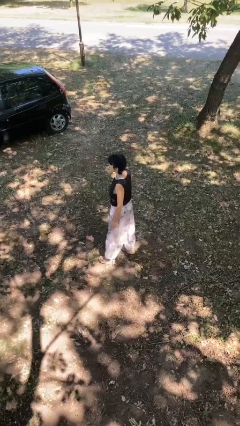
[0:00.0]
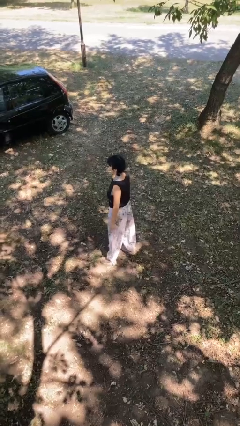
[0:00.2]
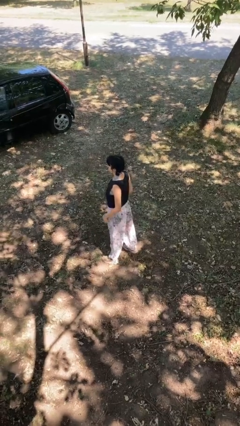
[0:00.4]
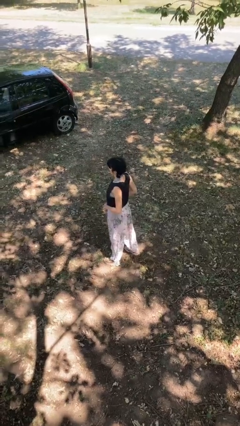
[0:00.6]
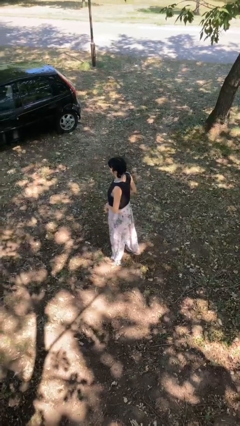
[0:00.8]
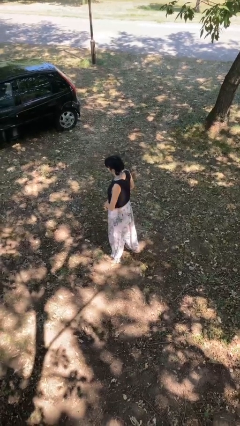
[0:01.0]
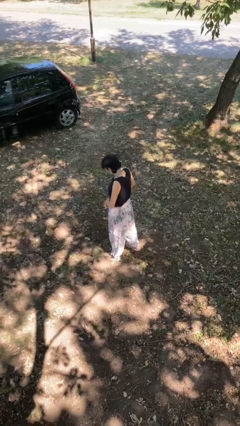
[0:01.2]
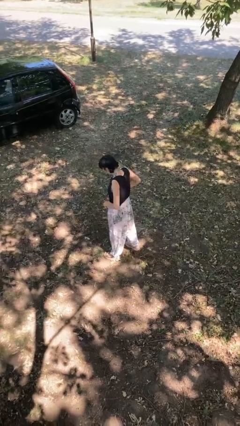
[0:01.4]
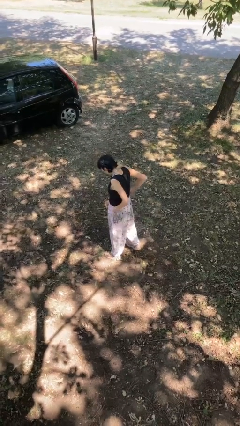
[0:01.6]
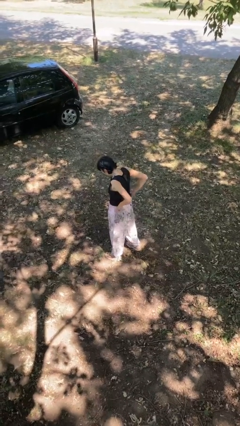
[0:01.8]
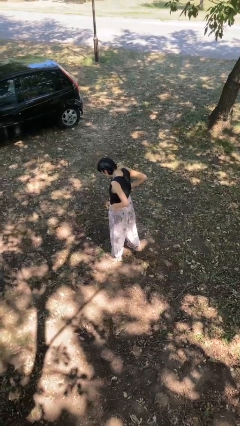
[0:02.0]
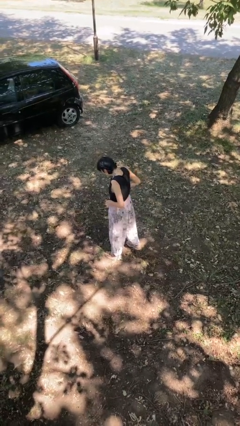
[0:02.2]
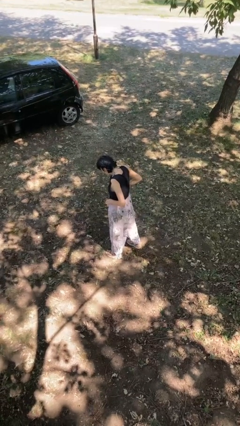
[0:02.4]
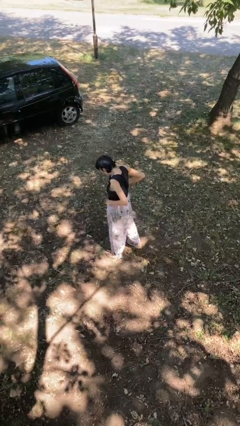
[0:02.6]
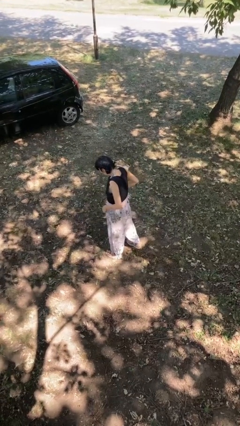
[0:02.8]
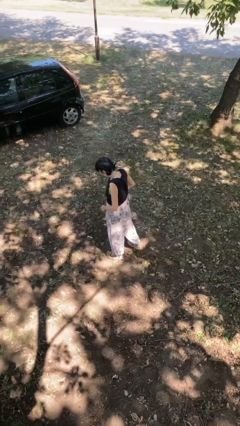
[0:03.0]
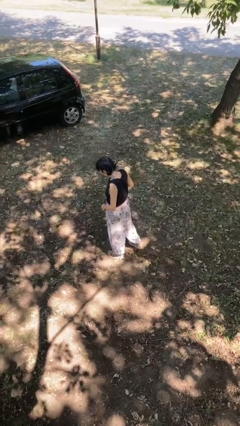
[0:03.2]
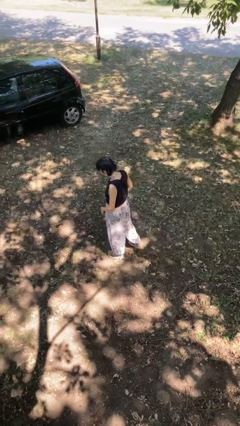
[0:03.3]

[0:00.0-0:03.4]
person hikes up pants

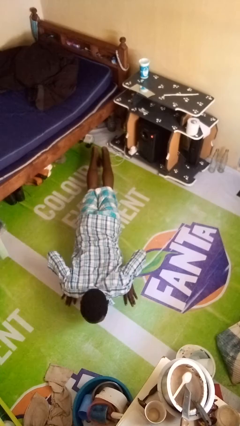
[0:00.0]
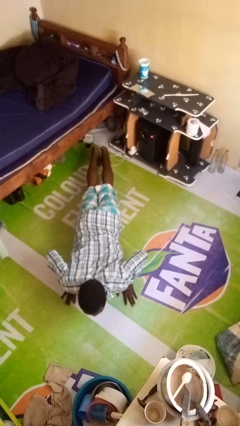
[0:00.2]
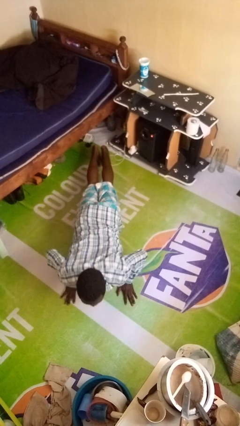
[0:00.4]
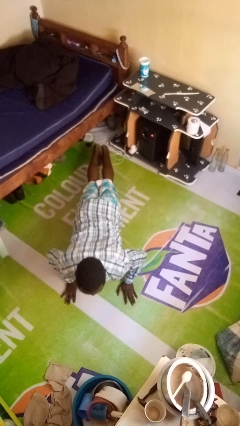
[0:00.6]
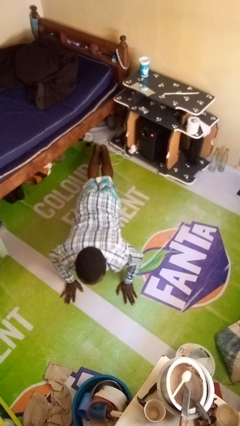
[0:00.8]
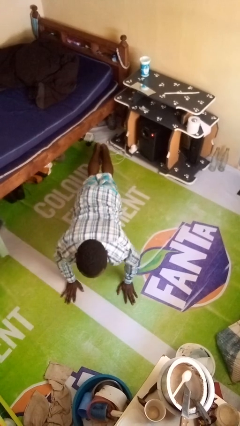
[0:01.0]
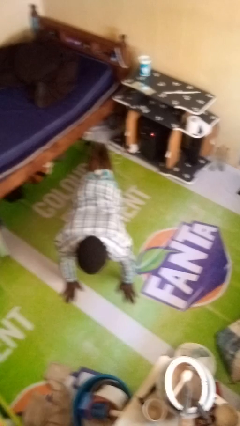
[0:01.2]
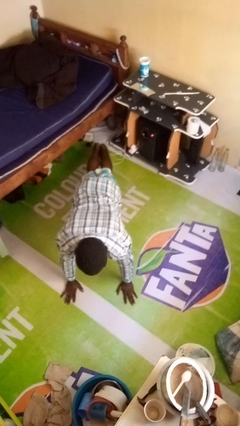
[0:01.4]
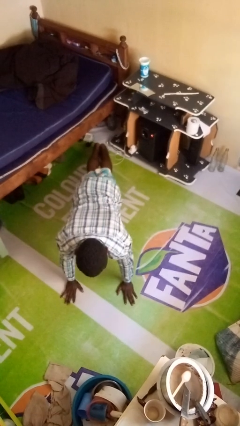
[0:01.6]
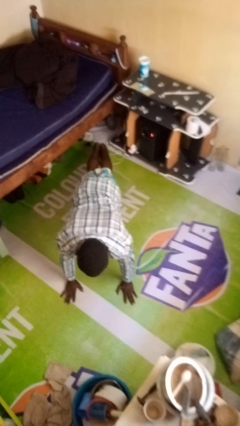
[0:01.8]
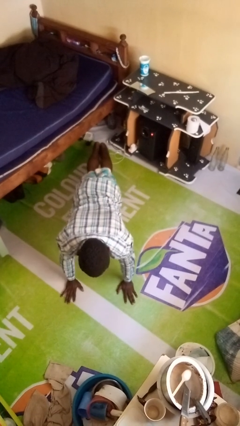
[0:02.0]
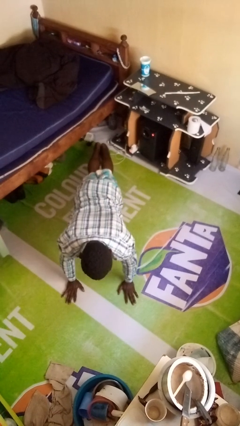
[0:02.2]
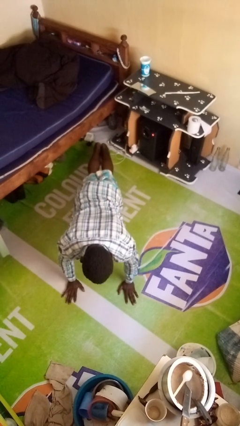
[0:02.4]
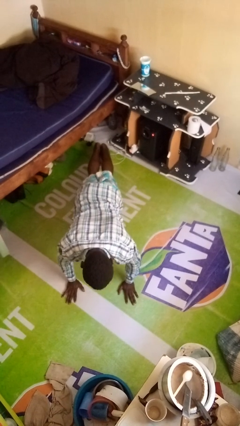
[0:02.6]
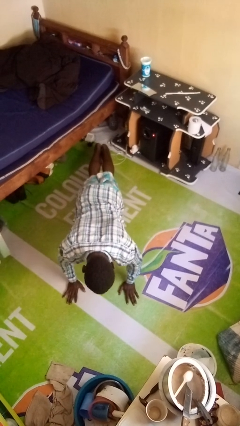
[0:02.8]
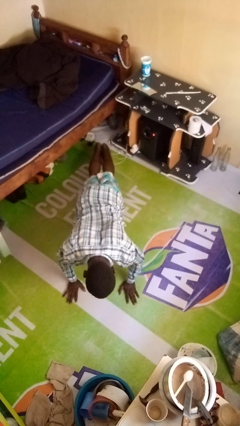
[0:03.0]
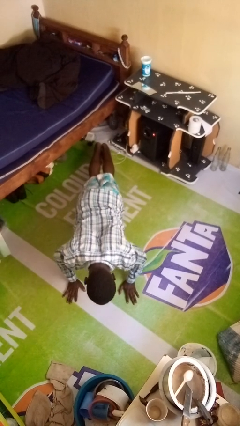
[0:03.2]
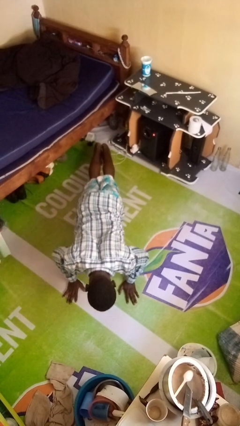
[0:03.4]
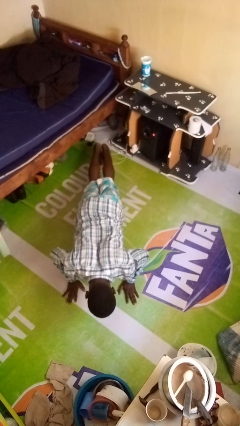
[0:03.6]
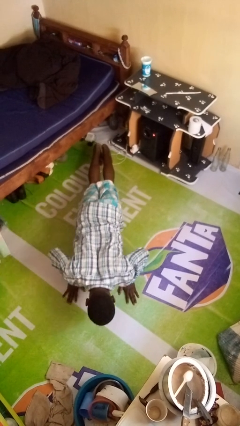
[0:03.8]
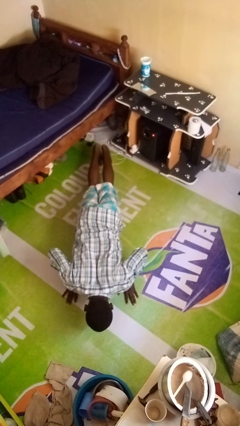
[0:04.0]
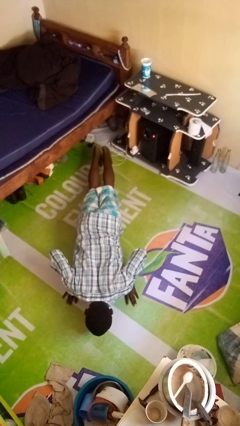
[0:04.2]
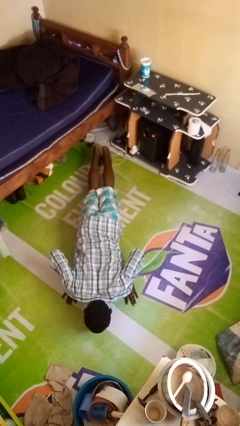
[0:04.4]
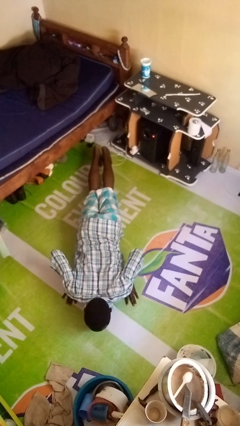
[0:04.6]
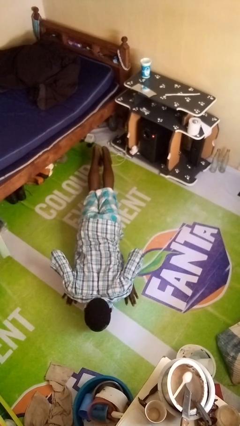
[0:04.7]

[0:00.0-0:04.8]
person exercises with pushup

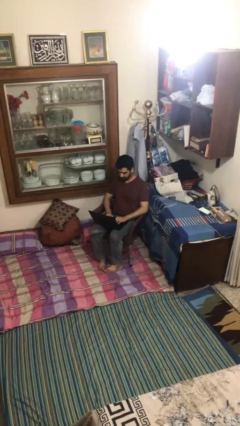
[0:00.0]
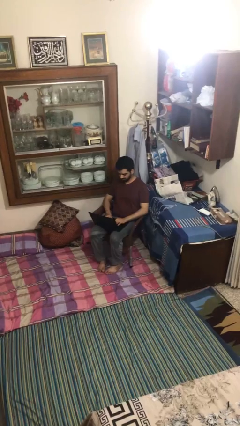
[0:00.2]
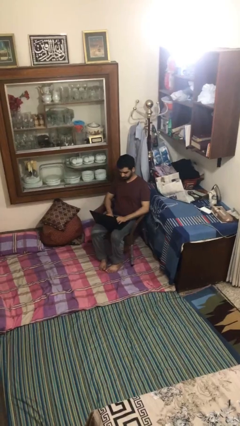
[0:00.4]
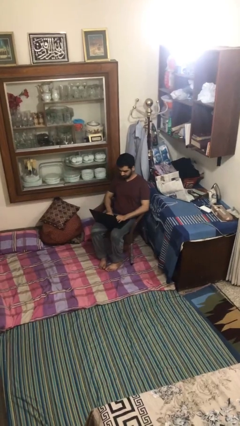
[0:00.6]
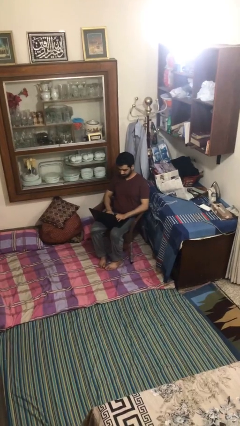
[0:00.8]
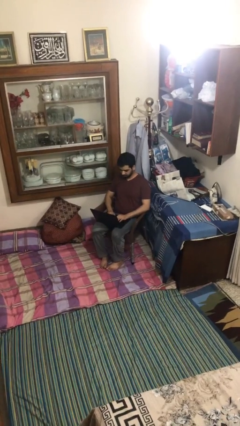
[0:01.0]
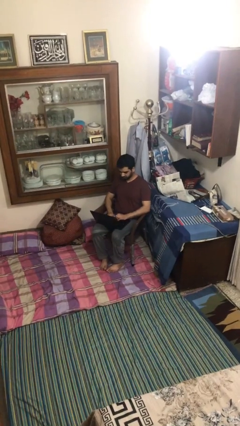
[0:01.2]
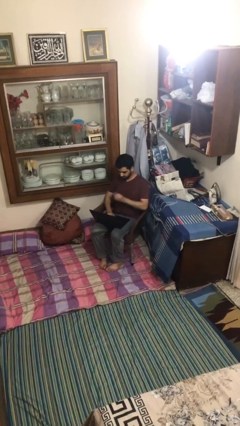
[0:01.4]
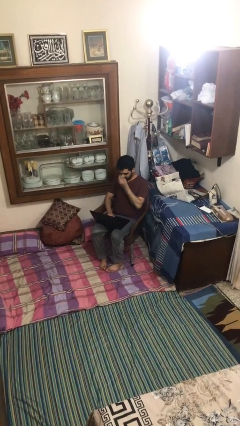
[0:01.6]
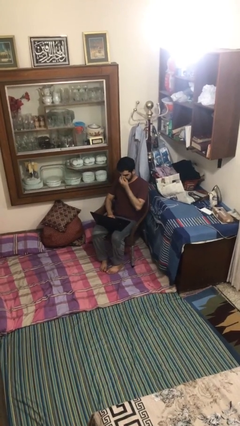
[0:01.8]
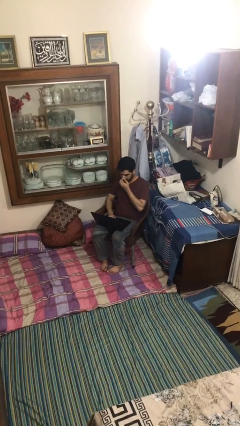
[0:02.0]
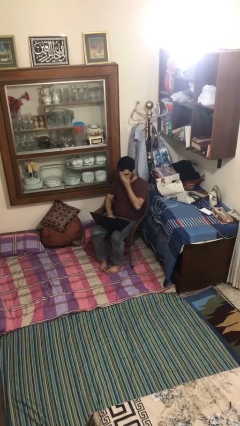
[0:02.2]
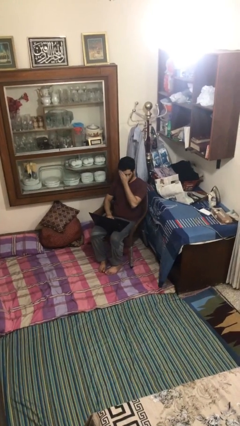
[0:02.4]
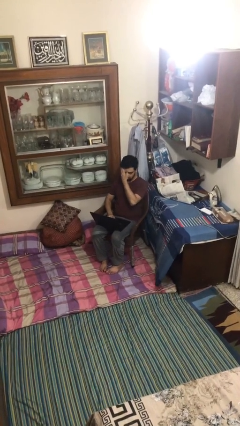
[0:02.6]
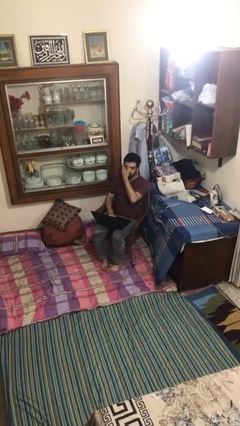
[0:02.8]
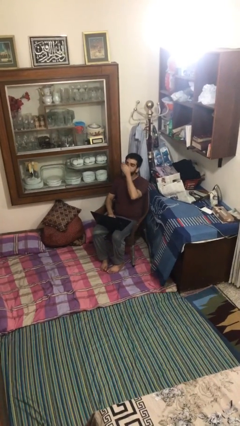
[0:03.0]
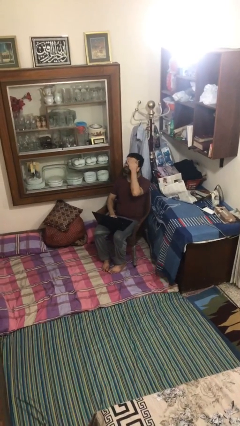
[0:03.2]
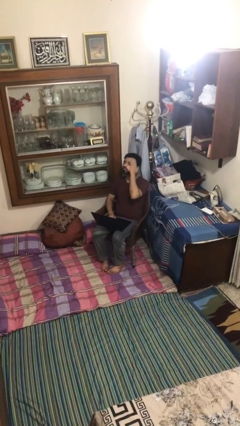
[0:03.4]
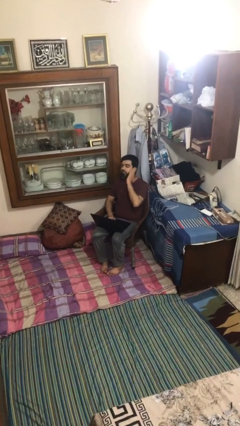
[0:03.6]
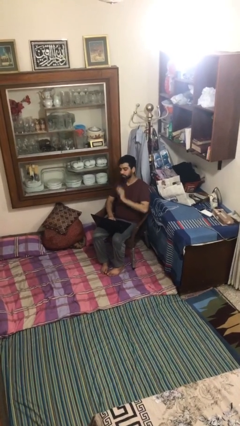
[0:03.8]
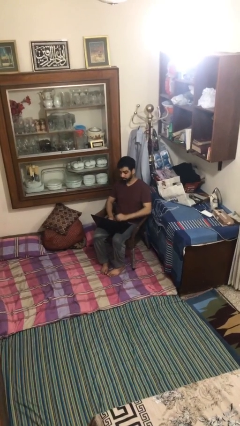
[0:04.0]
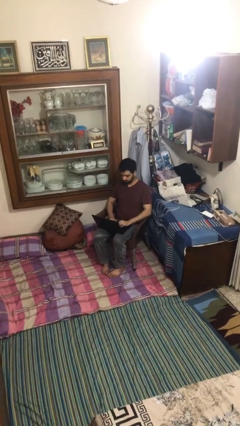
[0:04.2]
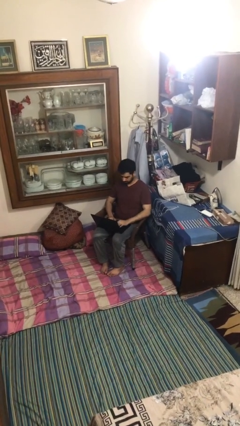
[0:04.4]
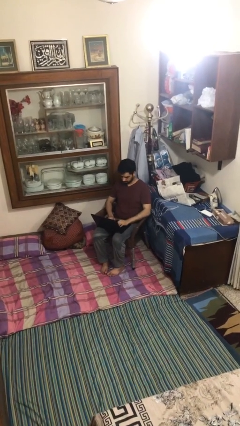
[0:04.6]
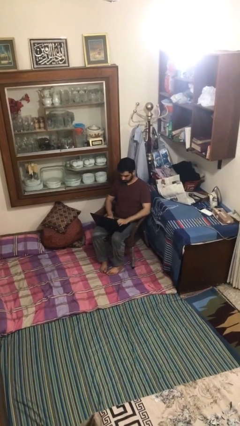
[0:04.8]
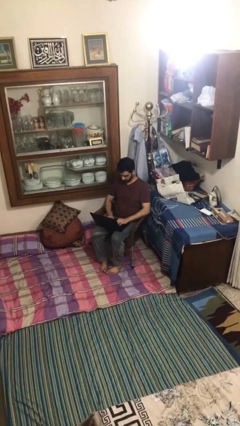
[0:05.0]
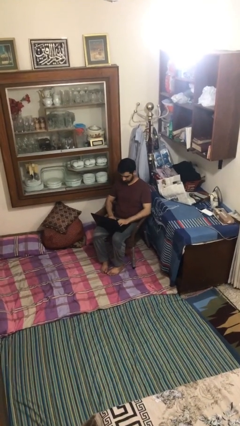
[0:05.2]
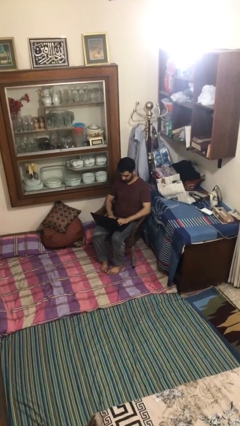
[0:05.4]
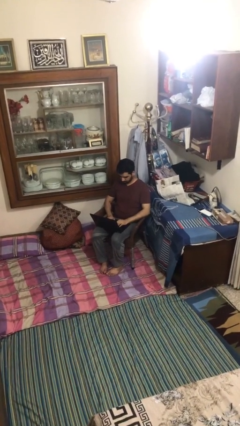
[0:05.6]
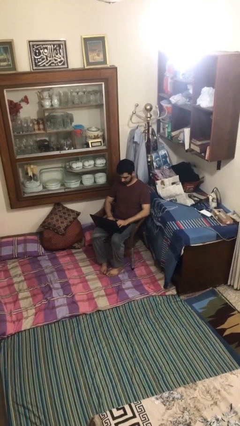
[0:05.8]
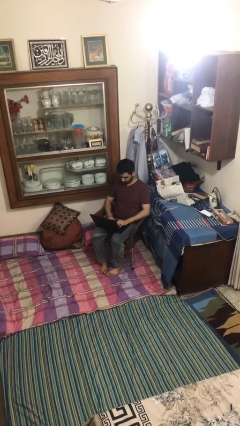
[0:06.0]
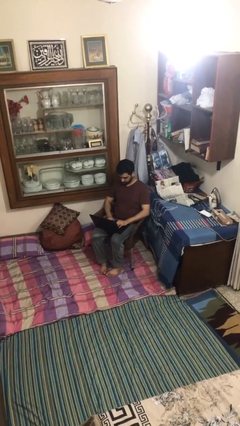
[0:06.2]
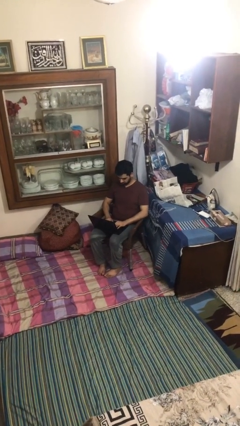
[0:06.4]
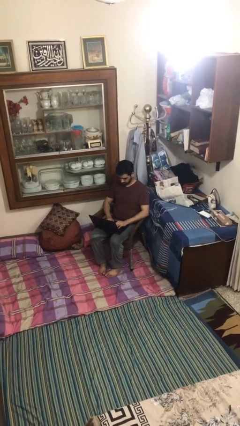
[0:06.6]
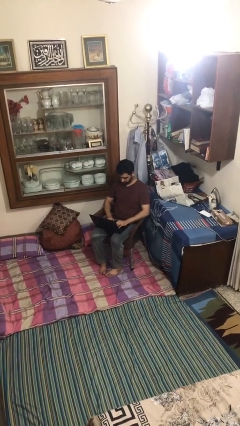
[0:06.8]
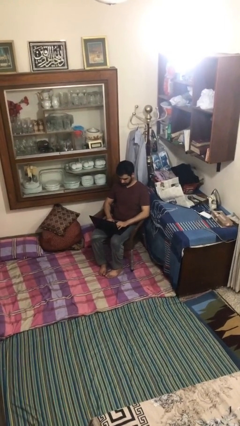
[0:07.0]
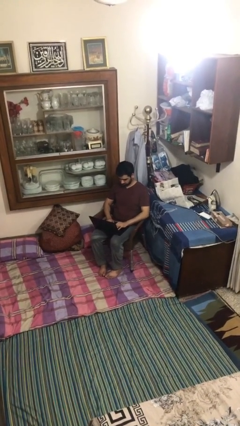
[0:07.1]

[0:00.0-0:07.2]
person interacts with laptop

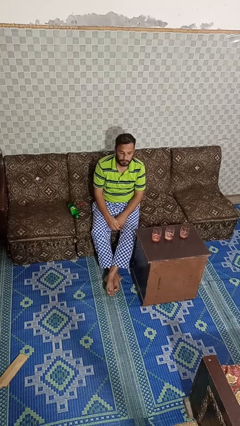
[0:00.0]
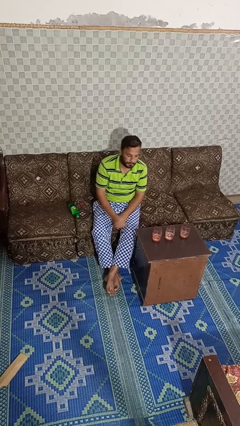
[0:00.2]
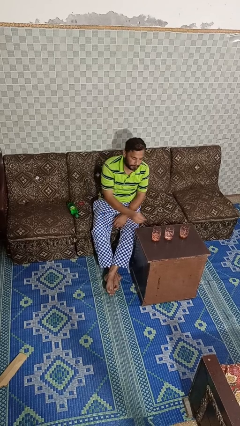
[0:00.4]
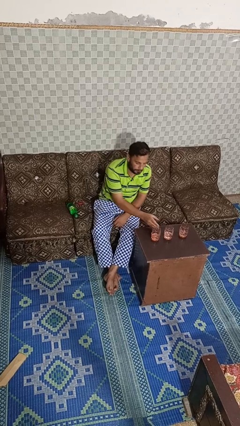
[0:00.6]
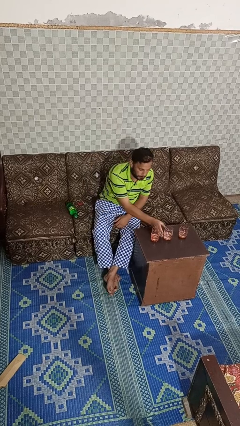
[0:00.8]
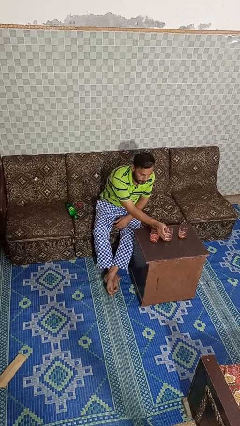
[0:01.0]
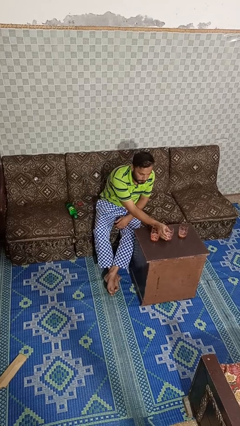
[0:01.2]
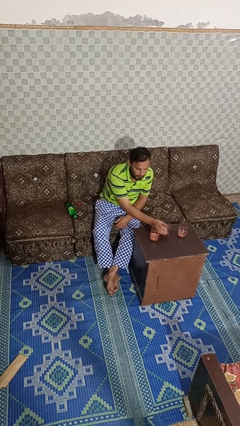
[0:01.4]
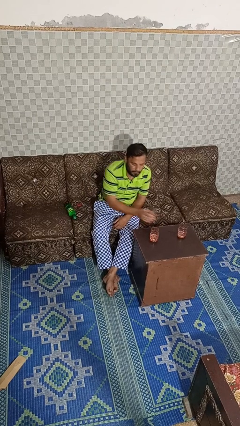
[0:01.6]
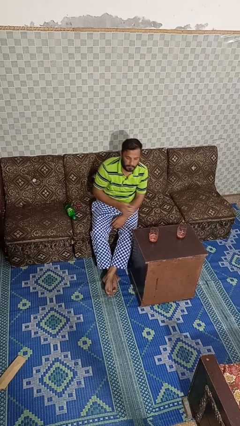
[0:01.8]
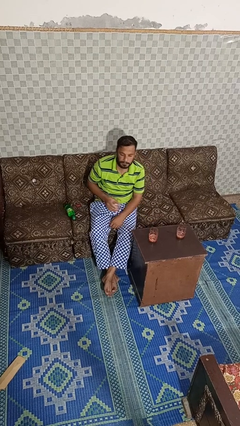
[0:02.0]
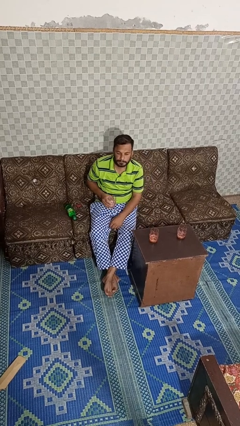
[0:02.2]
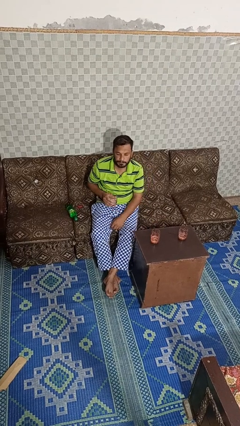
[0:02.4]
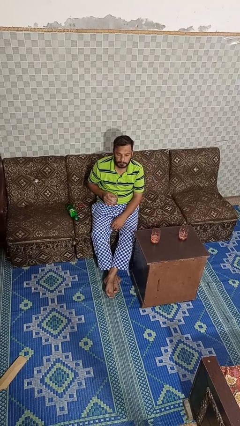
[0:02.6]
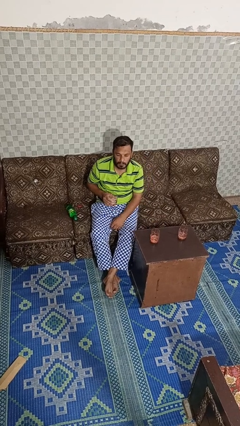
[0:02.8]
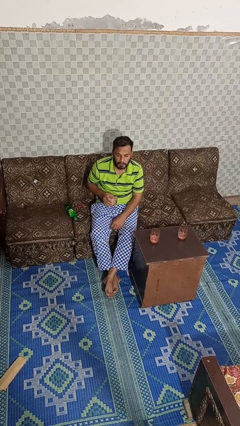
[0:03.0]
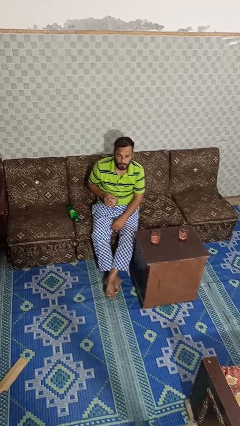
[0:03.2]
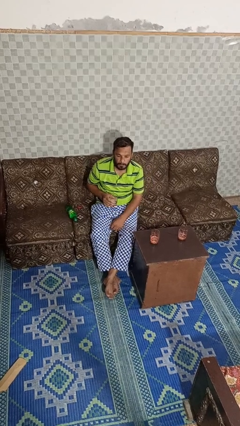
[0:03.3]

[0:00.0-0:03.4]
person picks up object from table
